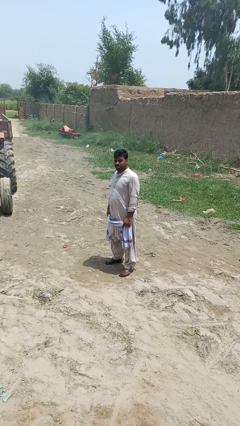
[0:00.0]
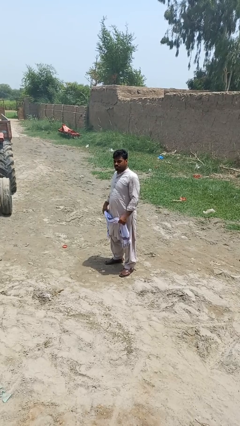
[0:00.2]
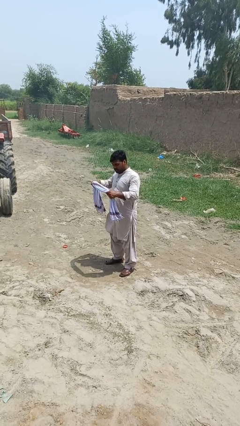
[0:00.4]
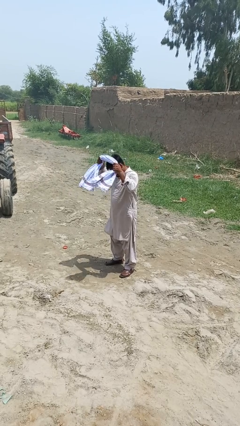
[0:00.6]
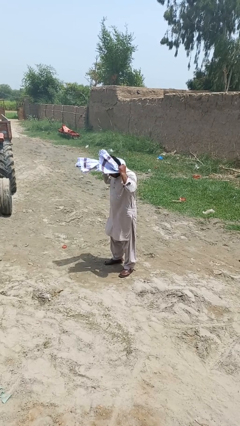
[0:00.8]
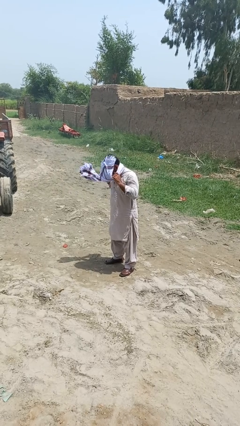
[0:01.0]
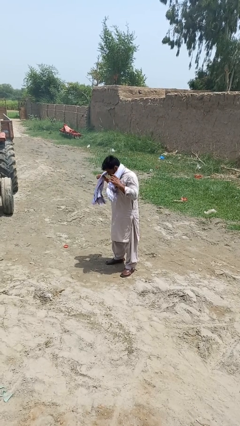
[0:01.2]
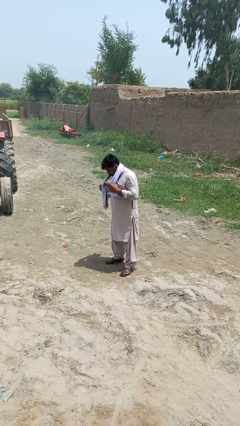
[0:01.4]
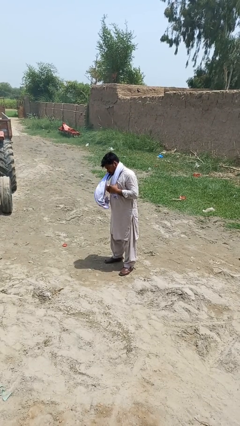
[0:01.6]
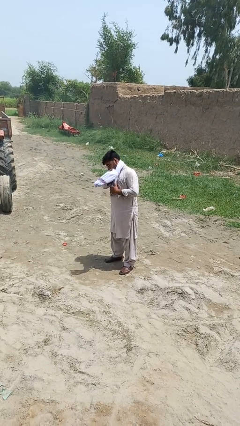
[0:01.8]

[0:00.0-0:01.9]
person puts on scarf

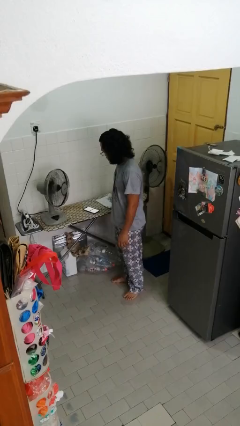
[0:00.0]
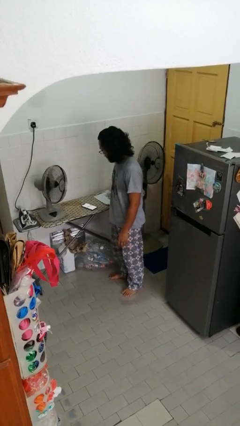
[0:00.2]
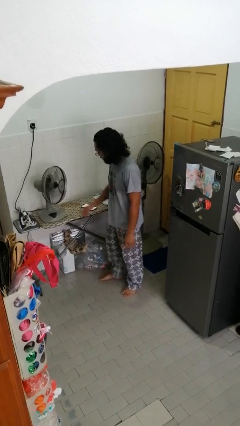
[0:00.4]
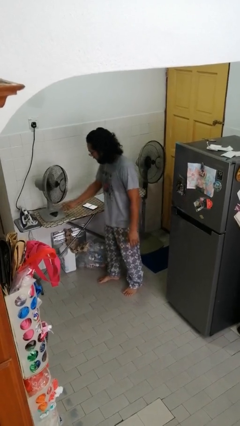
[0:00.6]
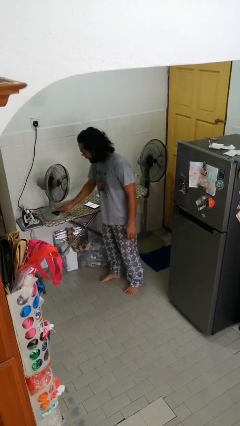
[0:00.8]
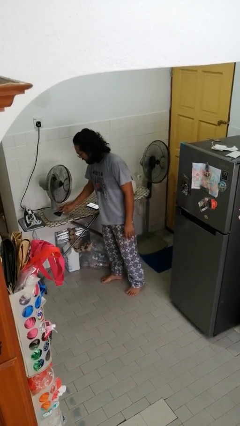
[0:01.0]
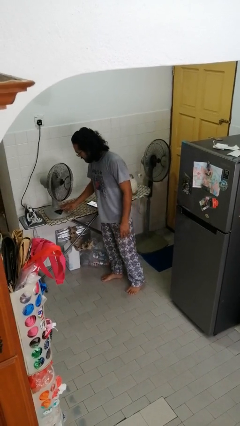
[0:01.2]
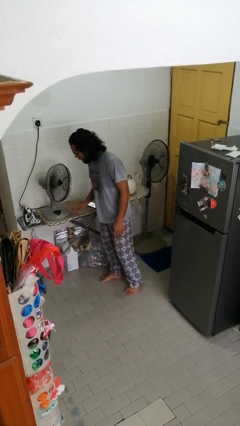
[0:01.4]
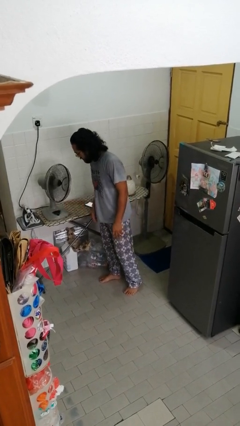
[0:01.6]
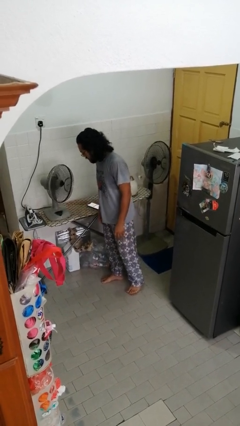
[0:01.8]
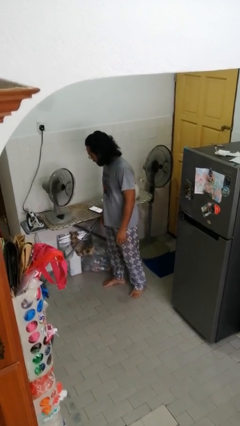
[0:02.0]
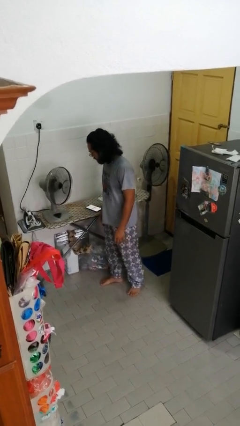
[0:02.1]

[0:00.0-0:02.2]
person turns on fan

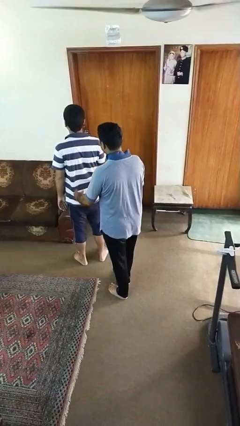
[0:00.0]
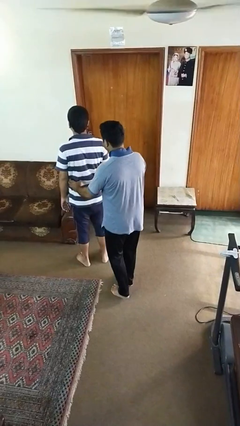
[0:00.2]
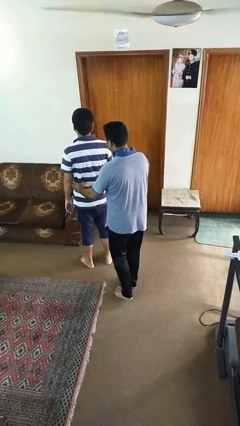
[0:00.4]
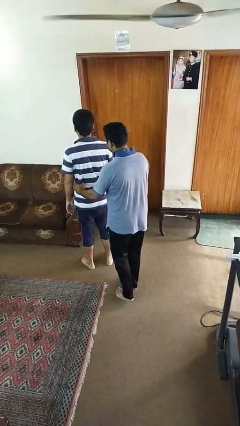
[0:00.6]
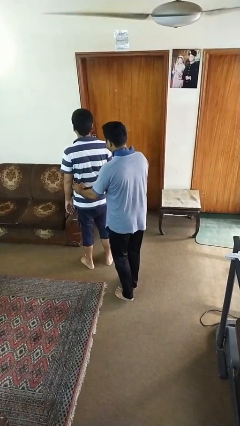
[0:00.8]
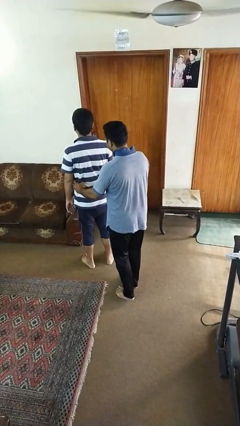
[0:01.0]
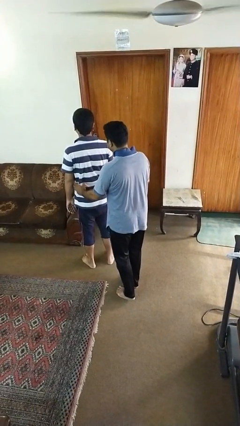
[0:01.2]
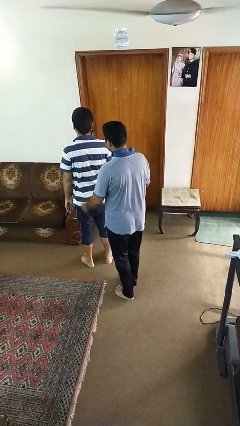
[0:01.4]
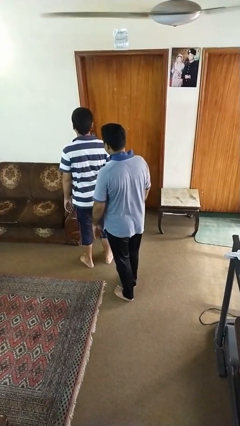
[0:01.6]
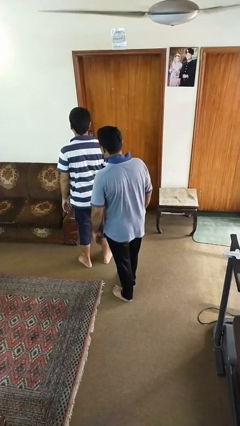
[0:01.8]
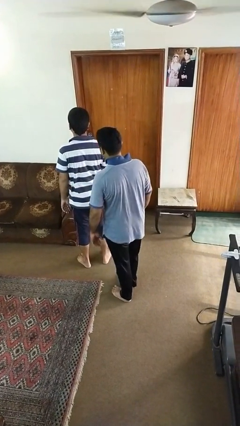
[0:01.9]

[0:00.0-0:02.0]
person tickles person

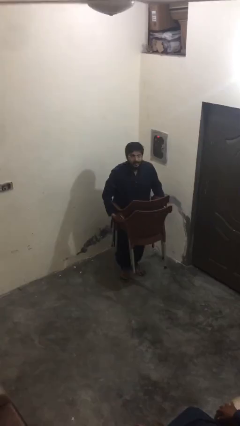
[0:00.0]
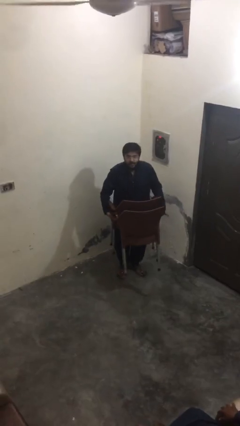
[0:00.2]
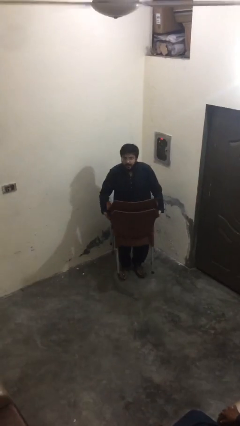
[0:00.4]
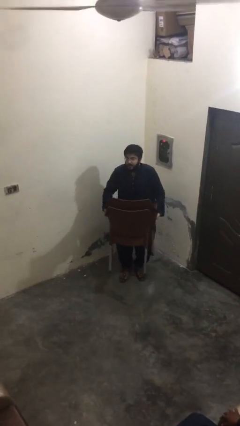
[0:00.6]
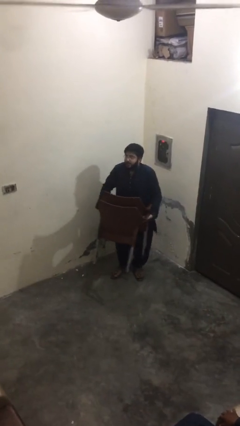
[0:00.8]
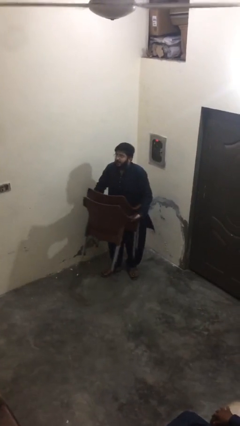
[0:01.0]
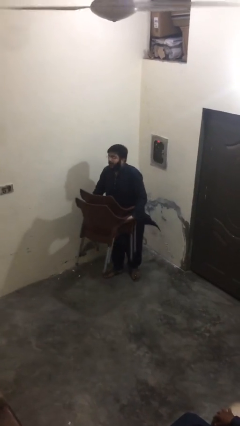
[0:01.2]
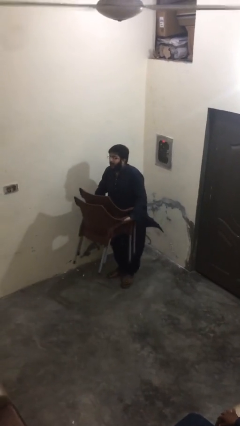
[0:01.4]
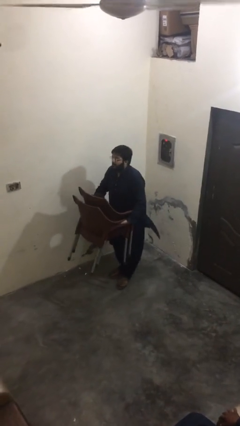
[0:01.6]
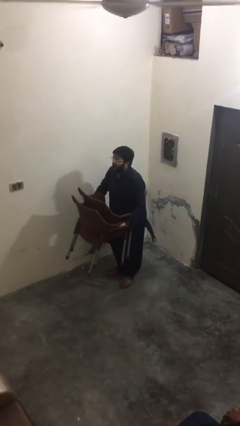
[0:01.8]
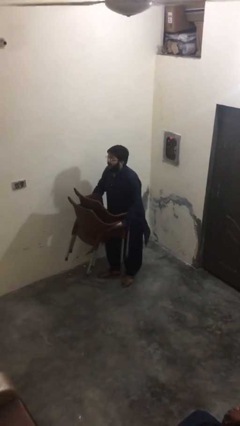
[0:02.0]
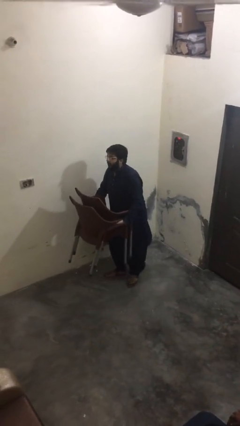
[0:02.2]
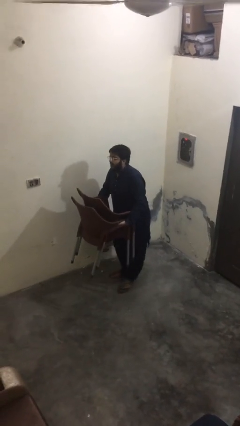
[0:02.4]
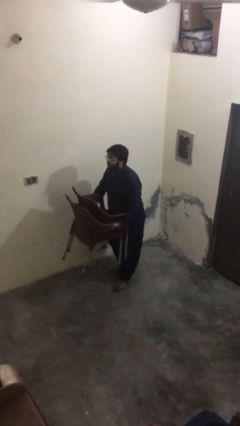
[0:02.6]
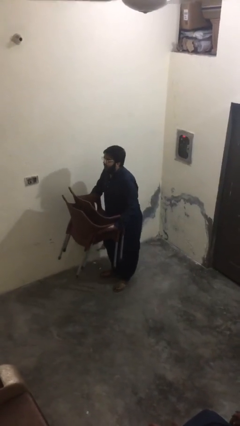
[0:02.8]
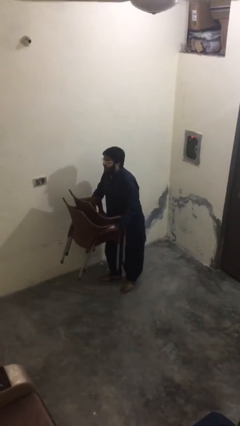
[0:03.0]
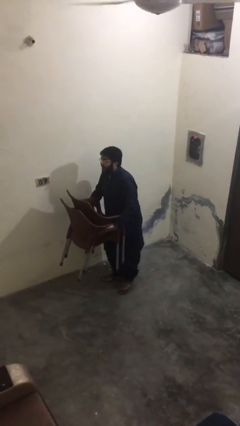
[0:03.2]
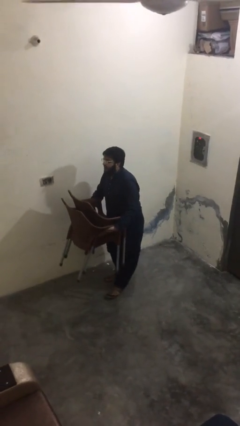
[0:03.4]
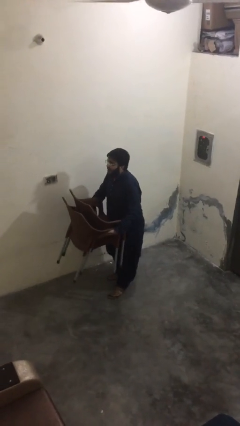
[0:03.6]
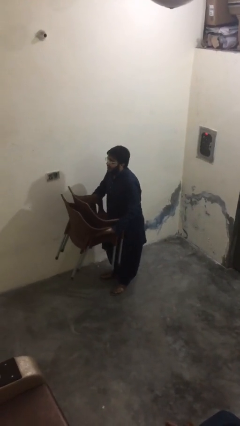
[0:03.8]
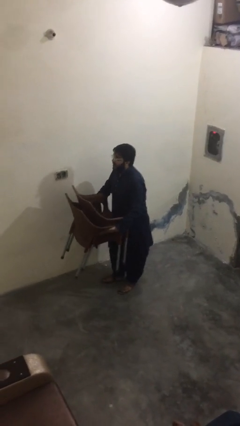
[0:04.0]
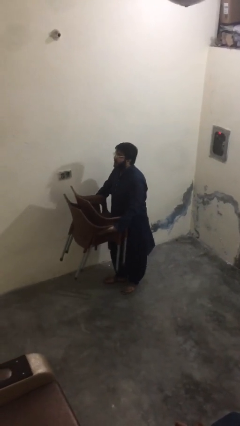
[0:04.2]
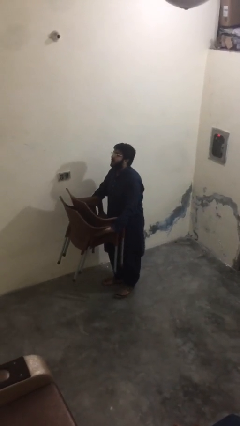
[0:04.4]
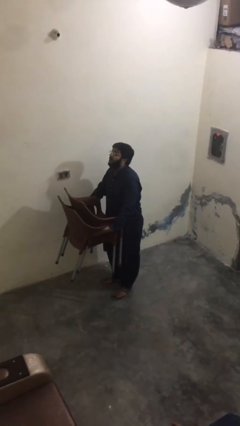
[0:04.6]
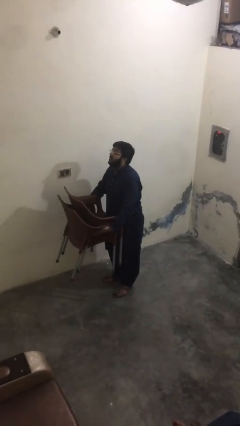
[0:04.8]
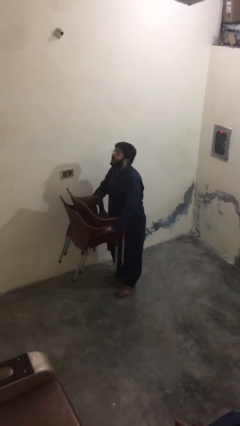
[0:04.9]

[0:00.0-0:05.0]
person carries heavy object

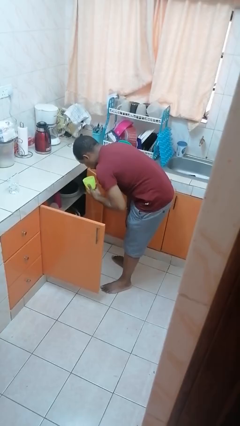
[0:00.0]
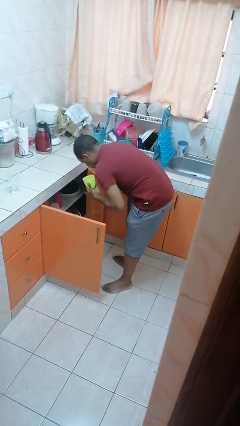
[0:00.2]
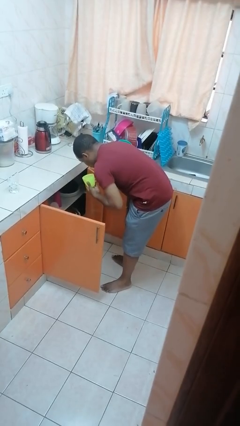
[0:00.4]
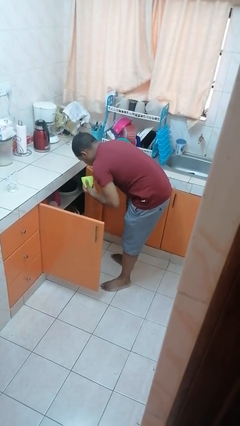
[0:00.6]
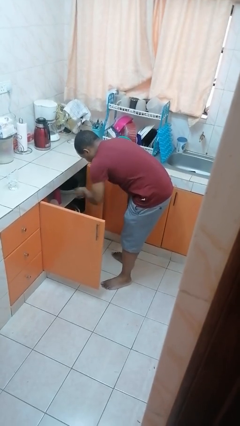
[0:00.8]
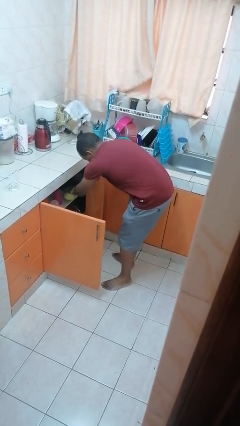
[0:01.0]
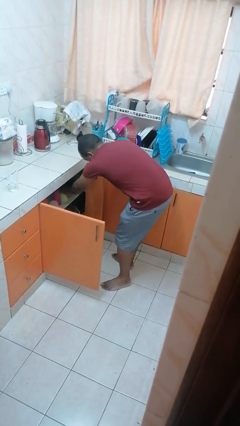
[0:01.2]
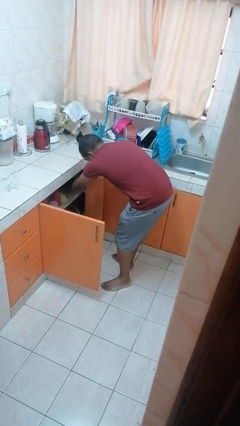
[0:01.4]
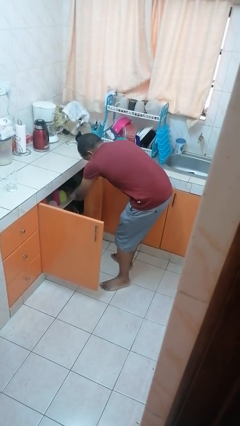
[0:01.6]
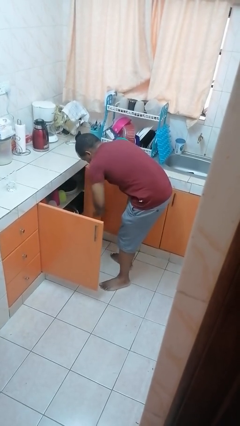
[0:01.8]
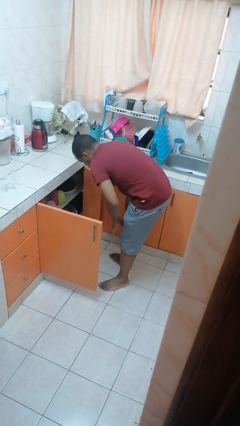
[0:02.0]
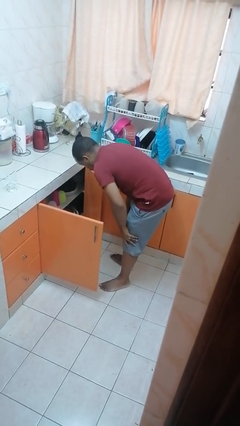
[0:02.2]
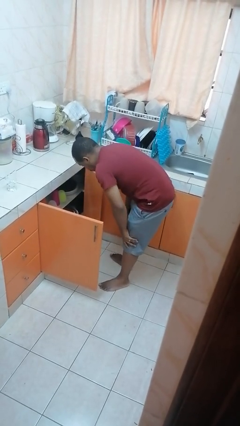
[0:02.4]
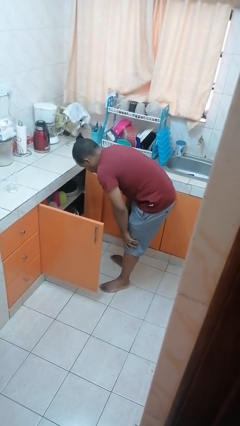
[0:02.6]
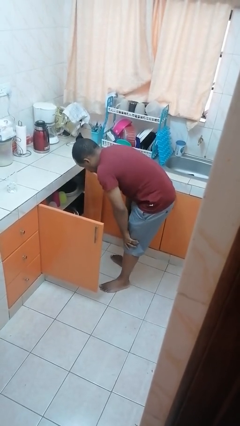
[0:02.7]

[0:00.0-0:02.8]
person puts object in cabinet

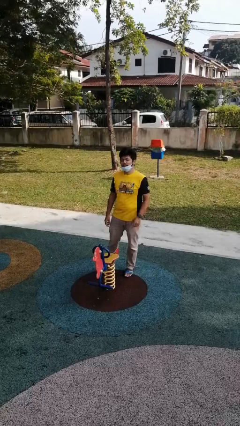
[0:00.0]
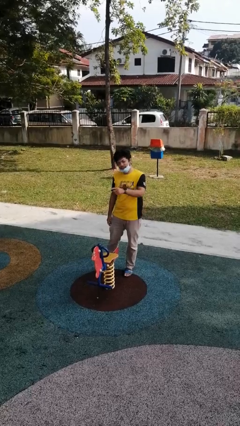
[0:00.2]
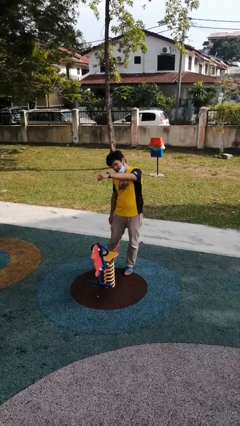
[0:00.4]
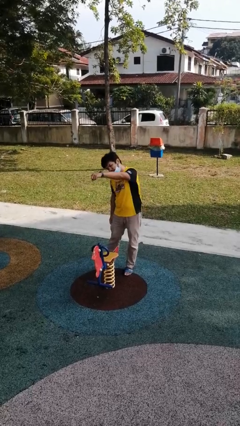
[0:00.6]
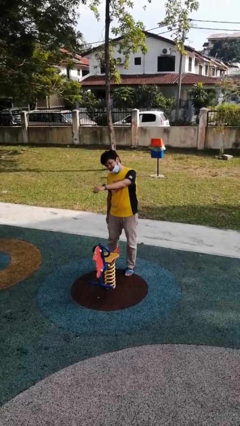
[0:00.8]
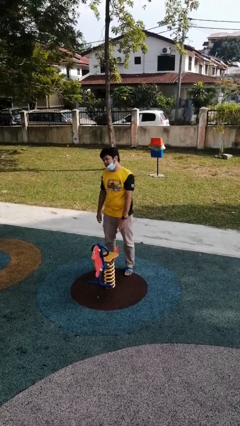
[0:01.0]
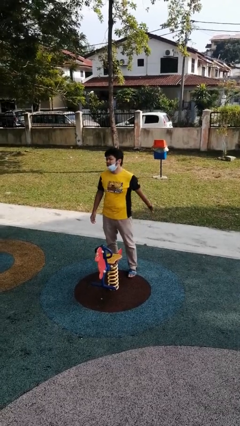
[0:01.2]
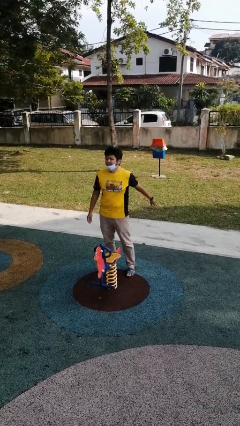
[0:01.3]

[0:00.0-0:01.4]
person points at person

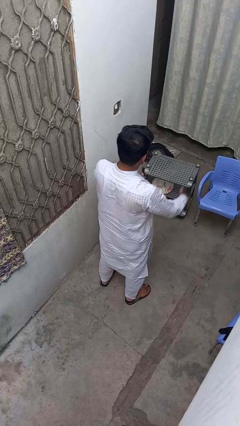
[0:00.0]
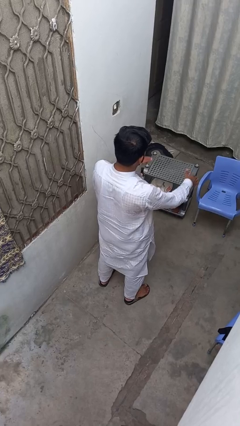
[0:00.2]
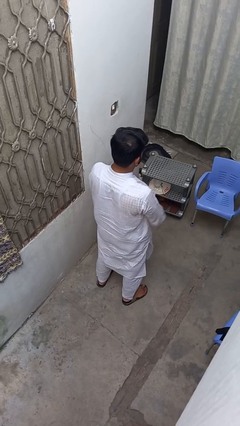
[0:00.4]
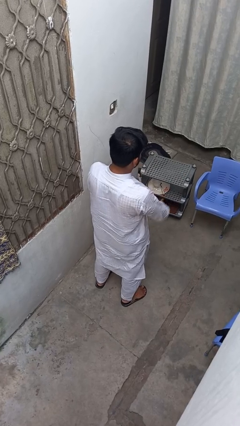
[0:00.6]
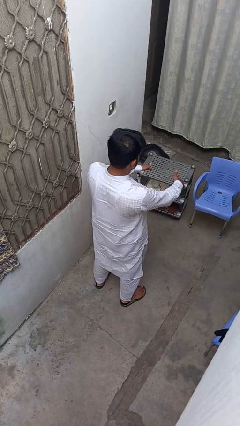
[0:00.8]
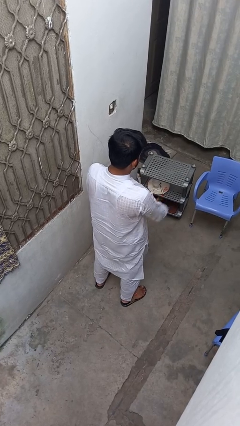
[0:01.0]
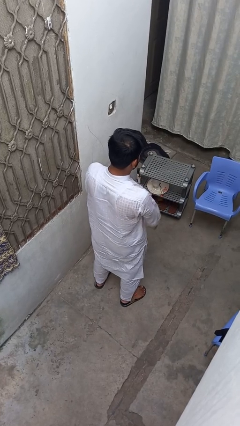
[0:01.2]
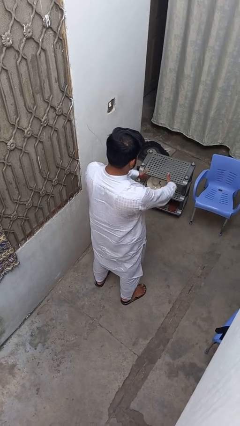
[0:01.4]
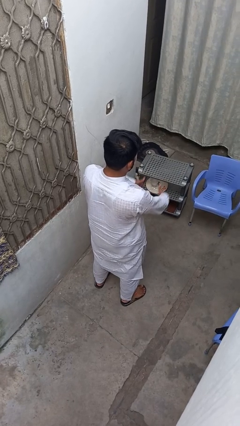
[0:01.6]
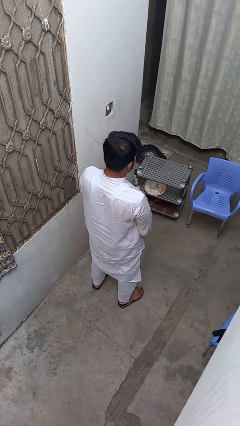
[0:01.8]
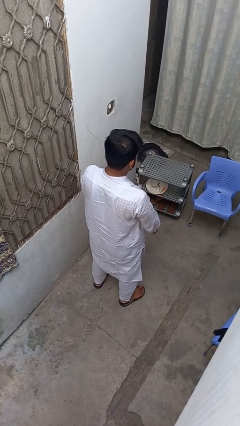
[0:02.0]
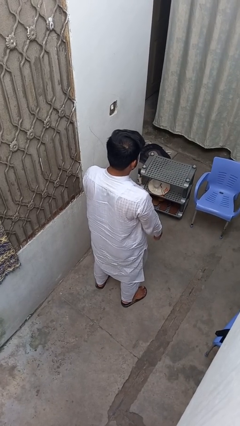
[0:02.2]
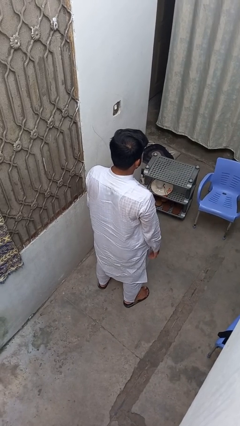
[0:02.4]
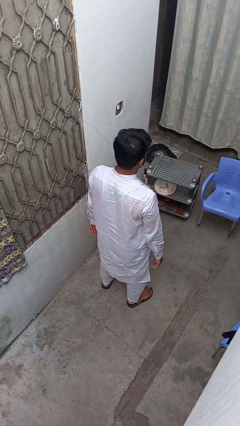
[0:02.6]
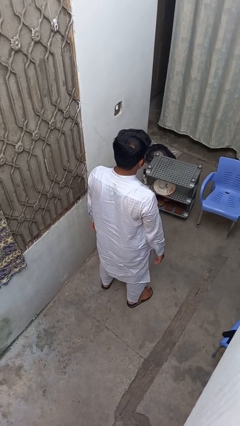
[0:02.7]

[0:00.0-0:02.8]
person slaps hands on thighs
